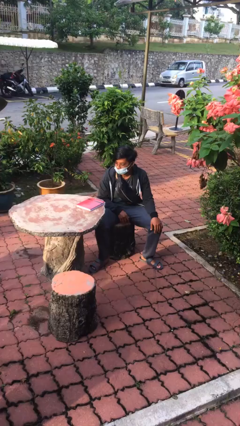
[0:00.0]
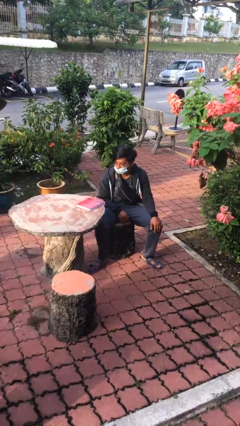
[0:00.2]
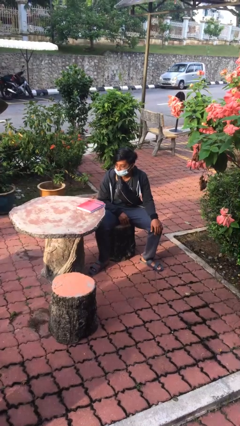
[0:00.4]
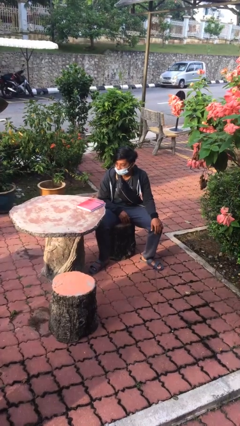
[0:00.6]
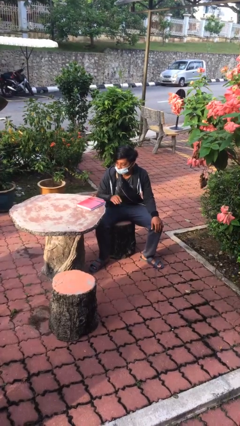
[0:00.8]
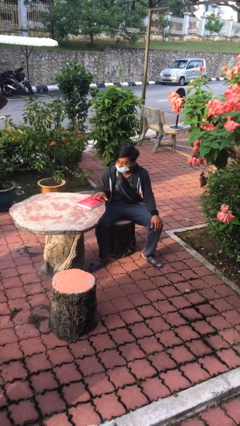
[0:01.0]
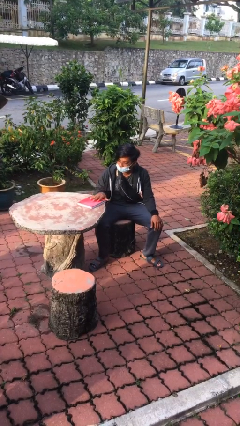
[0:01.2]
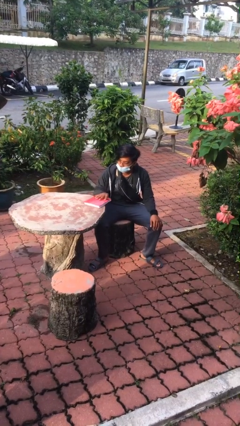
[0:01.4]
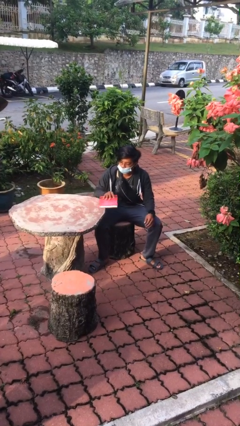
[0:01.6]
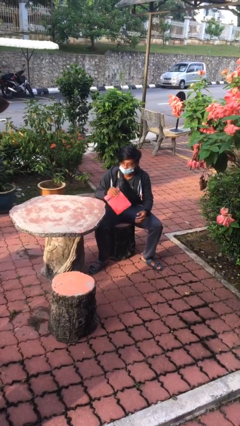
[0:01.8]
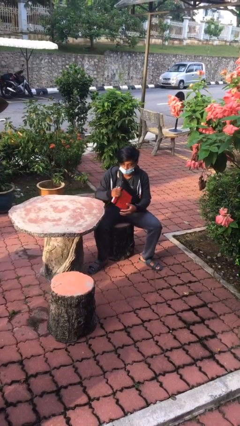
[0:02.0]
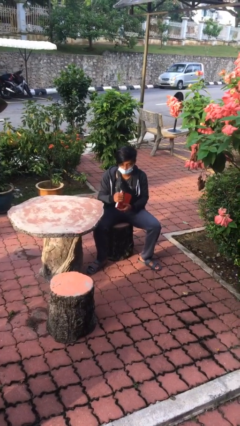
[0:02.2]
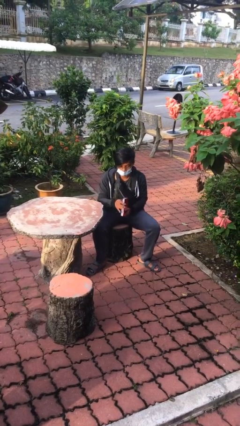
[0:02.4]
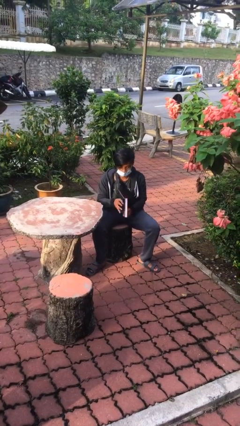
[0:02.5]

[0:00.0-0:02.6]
person picks up object from table

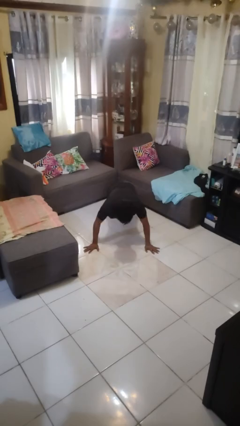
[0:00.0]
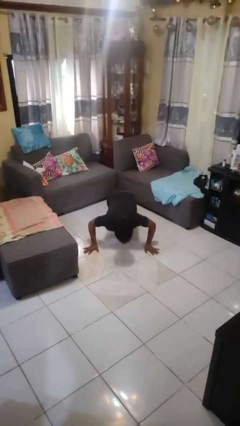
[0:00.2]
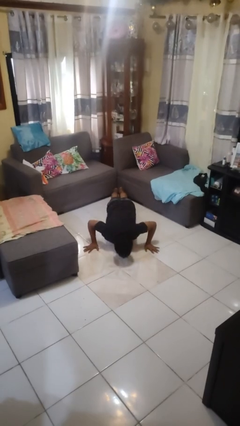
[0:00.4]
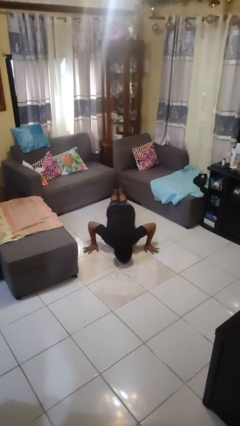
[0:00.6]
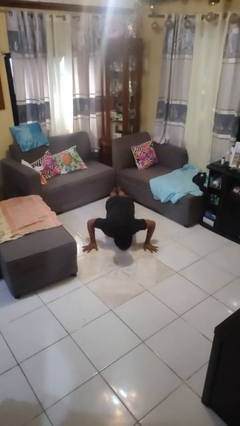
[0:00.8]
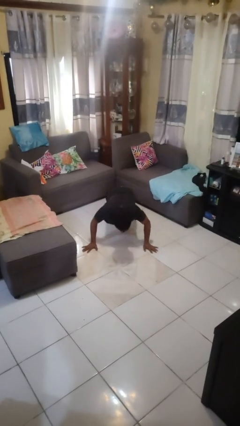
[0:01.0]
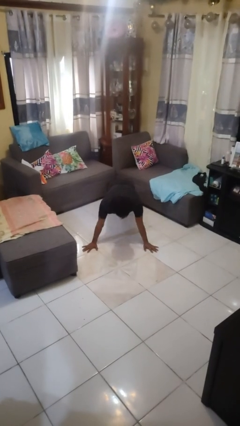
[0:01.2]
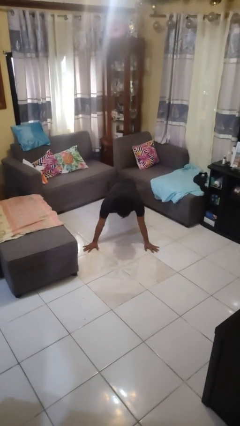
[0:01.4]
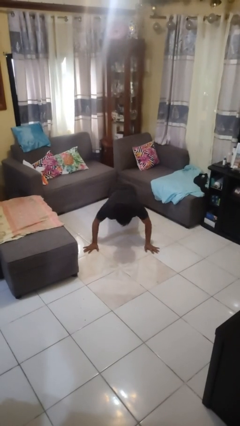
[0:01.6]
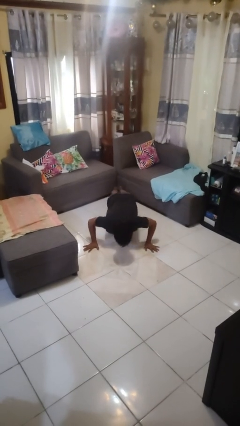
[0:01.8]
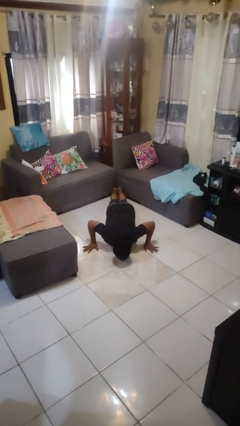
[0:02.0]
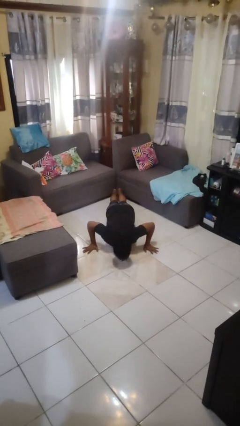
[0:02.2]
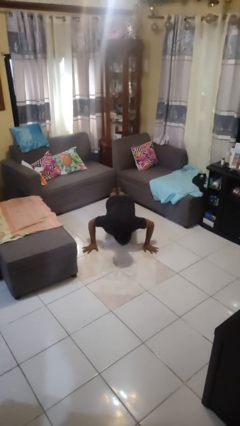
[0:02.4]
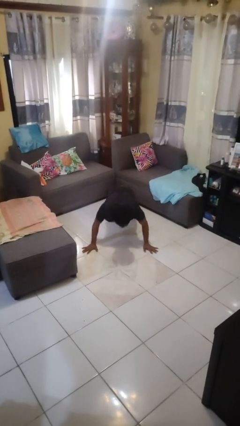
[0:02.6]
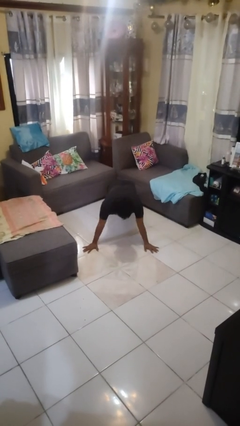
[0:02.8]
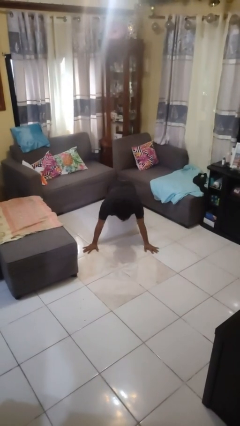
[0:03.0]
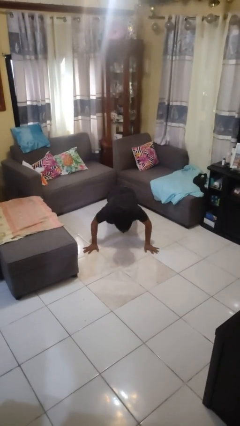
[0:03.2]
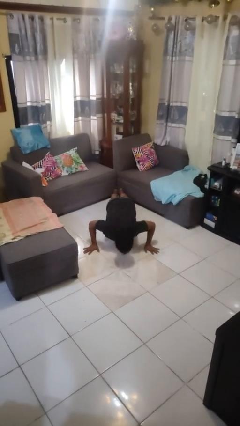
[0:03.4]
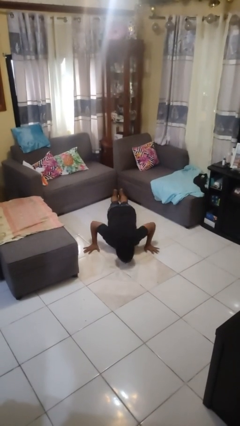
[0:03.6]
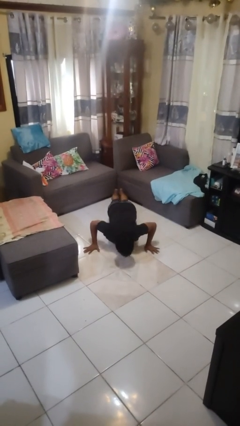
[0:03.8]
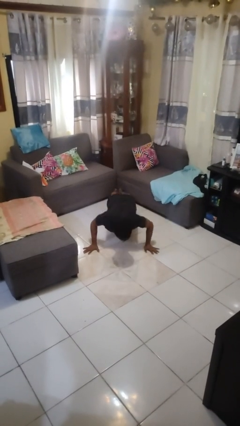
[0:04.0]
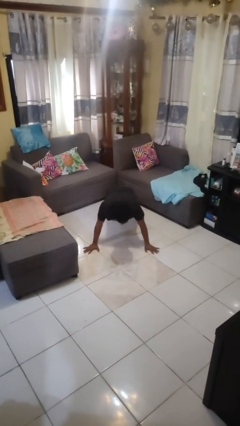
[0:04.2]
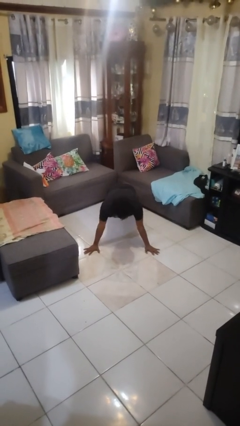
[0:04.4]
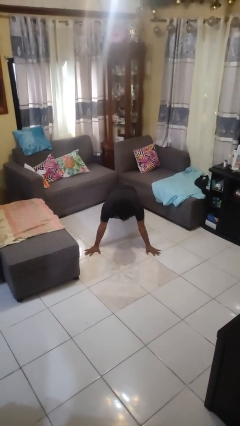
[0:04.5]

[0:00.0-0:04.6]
person exercises with pushup

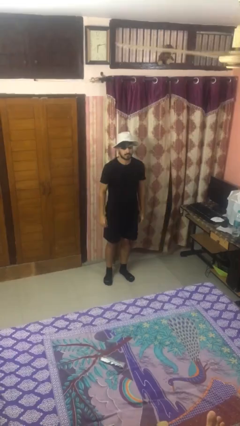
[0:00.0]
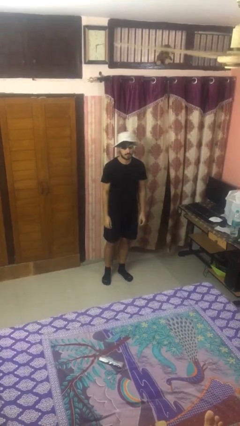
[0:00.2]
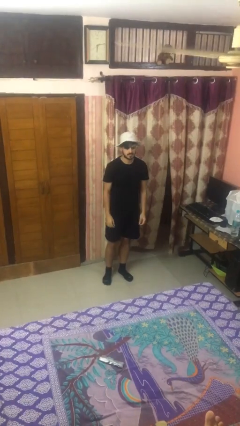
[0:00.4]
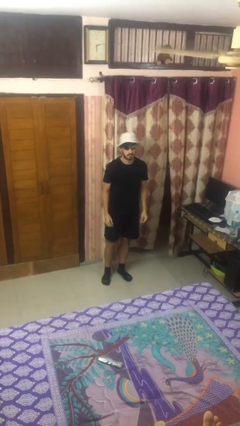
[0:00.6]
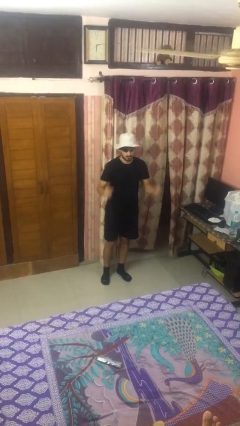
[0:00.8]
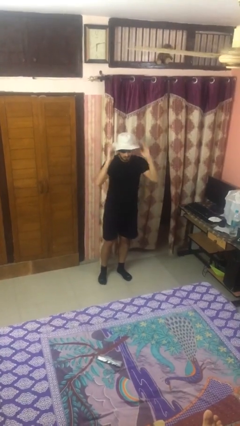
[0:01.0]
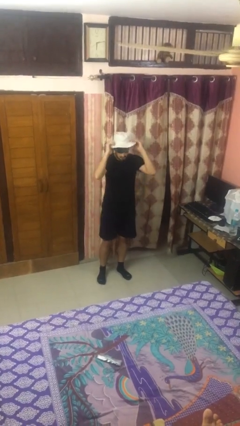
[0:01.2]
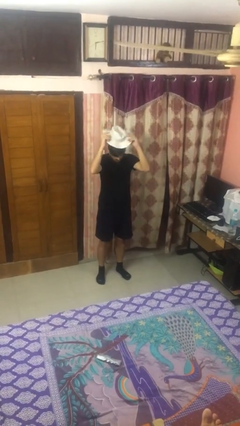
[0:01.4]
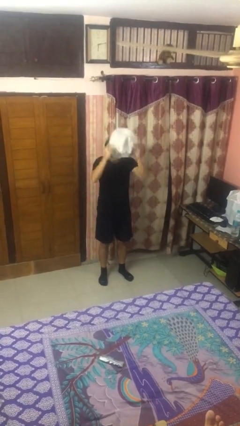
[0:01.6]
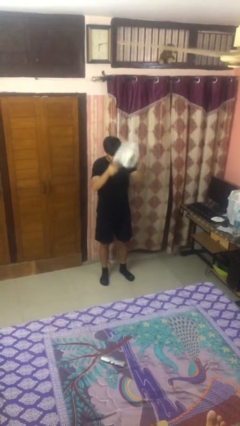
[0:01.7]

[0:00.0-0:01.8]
person takes off hat

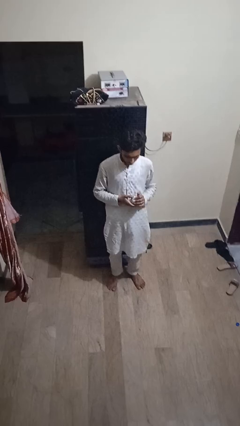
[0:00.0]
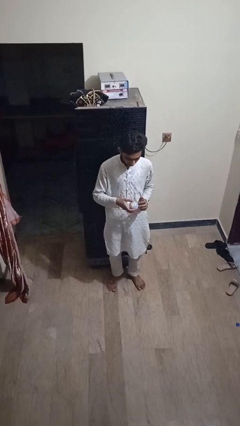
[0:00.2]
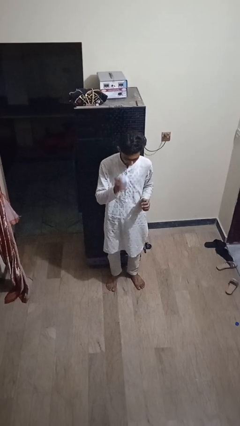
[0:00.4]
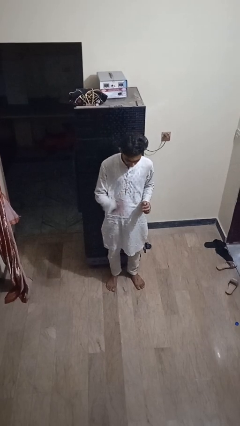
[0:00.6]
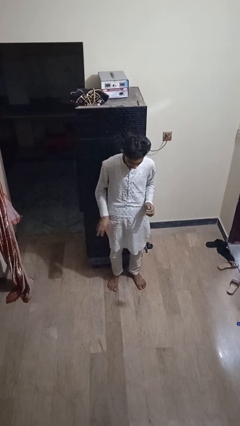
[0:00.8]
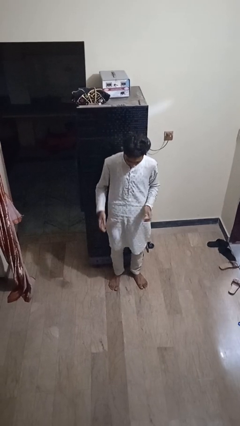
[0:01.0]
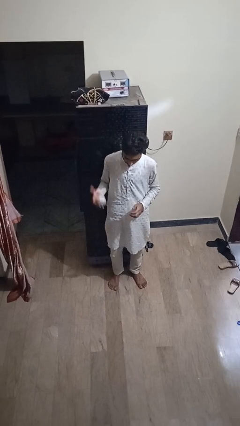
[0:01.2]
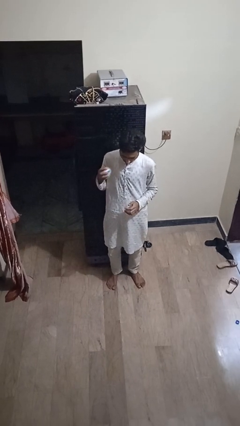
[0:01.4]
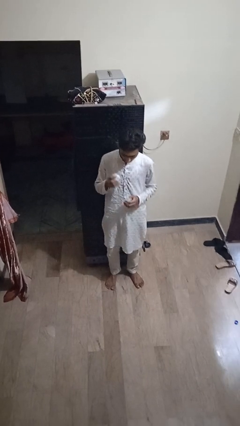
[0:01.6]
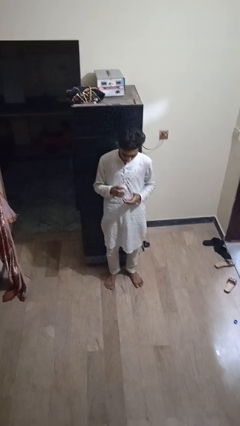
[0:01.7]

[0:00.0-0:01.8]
person bounces ball on floor

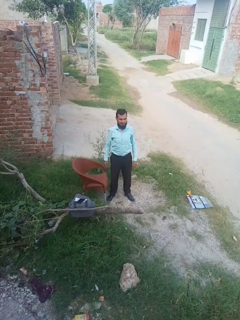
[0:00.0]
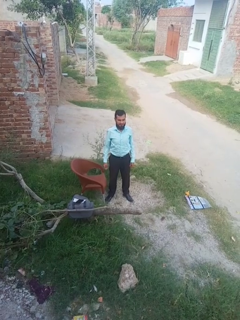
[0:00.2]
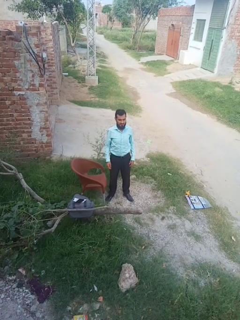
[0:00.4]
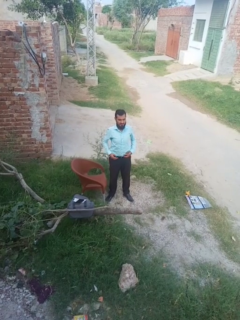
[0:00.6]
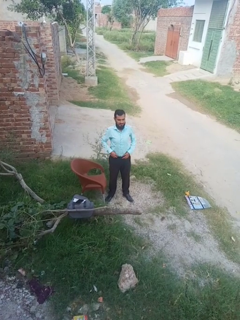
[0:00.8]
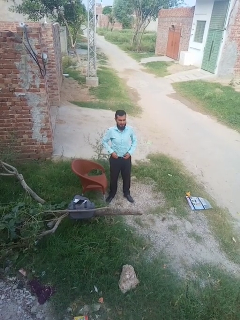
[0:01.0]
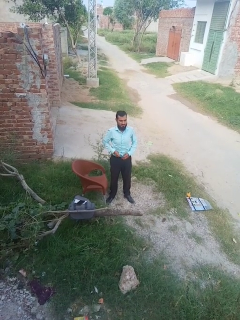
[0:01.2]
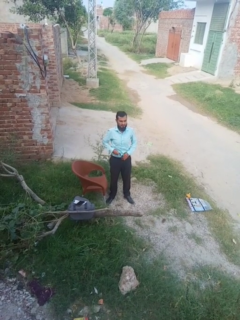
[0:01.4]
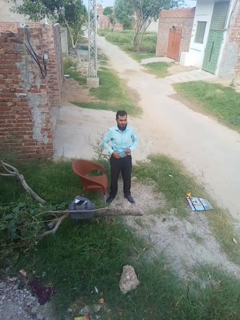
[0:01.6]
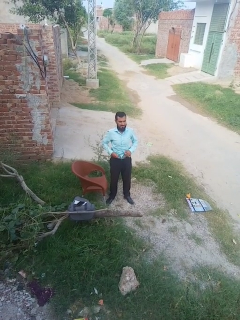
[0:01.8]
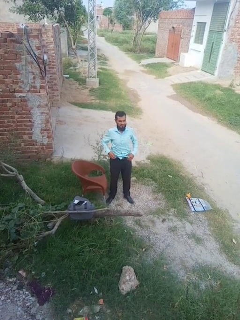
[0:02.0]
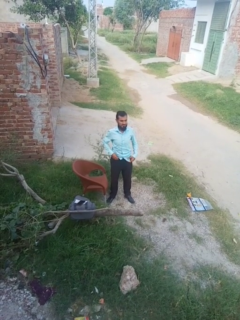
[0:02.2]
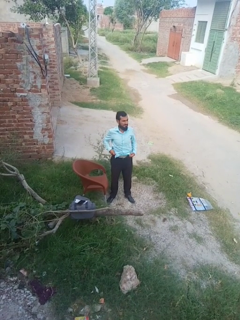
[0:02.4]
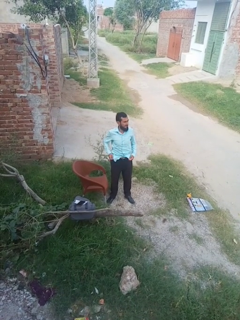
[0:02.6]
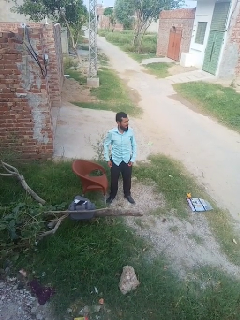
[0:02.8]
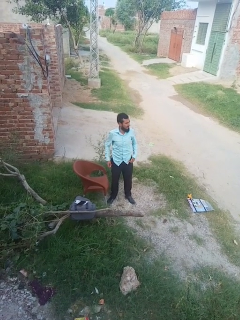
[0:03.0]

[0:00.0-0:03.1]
person untucks shirt

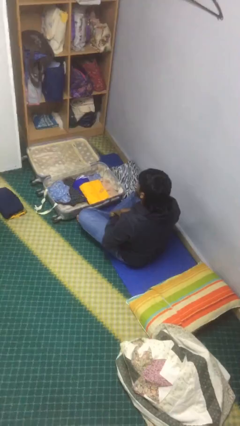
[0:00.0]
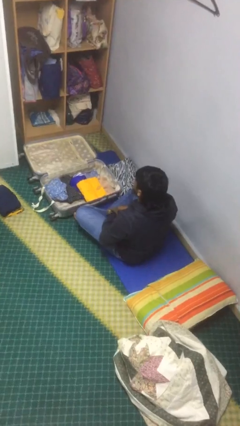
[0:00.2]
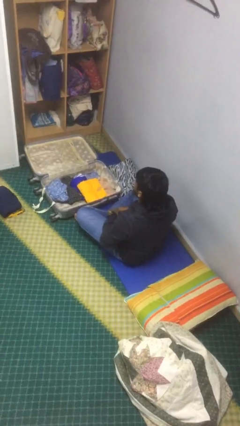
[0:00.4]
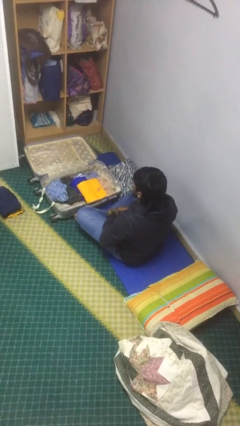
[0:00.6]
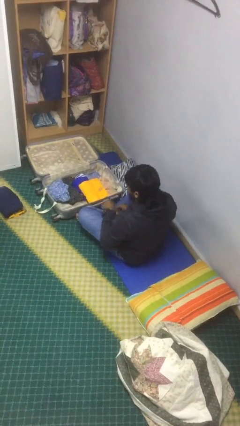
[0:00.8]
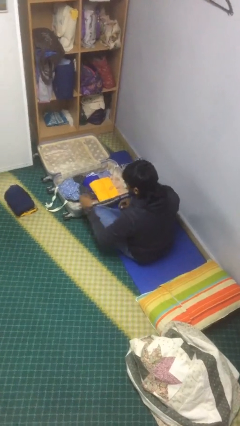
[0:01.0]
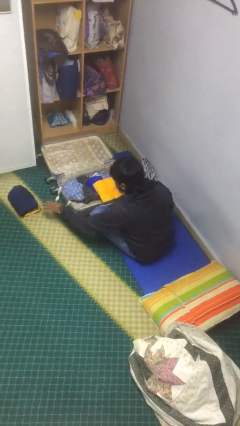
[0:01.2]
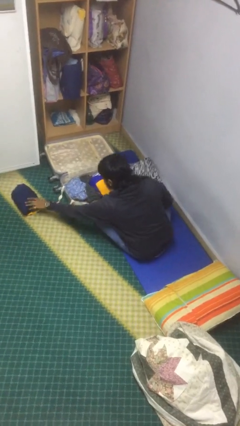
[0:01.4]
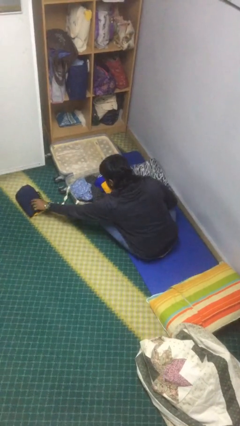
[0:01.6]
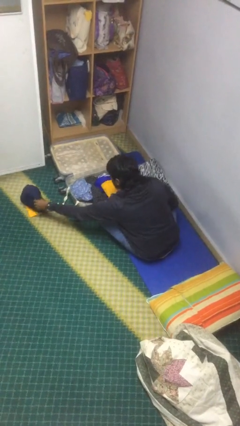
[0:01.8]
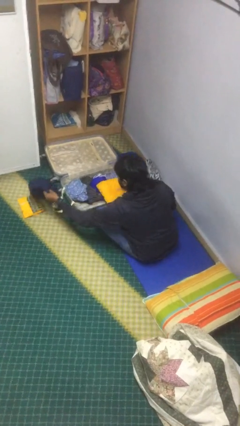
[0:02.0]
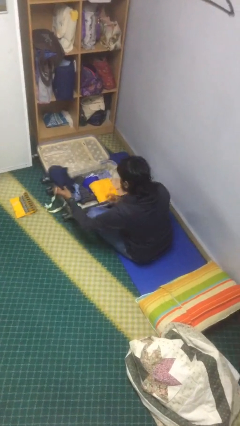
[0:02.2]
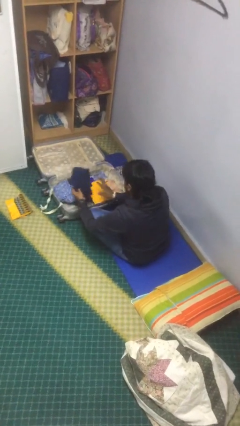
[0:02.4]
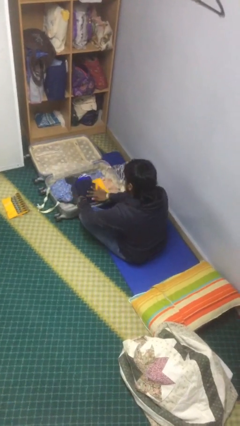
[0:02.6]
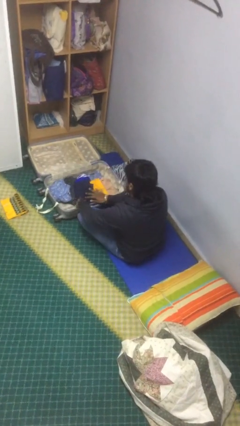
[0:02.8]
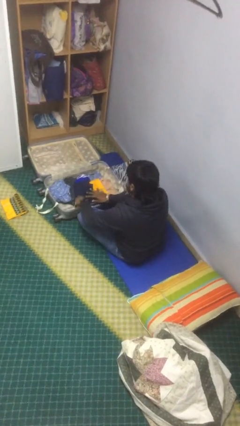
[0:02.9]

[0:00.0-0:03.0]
person loads clothes into suitcase

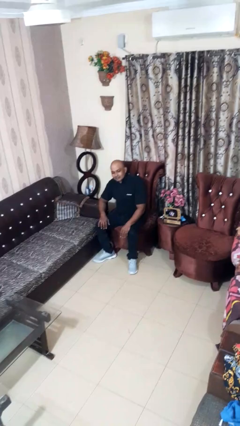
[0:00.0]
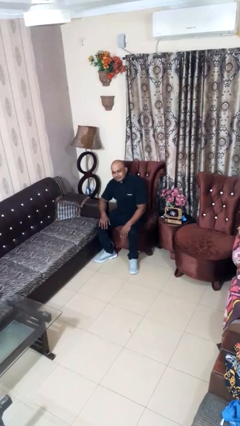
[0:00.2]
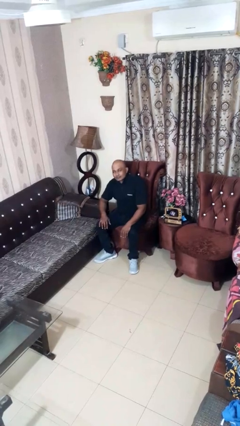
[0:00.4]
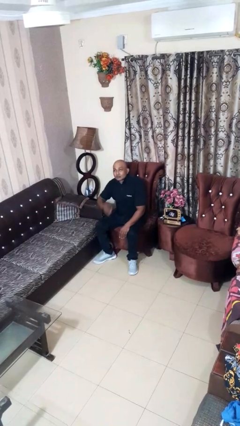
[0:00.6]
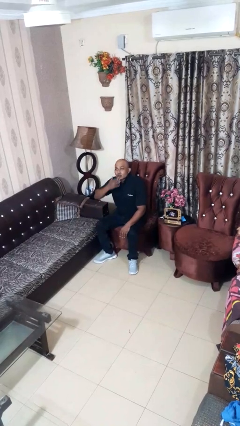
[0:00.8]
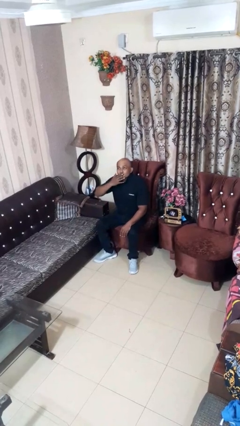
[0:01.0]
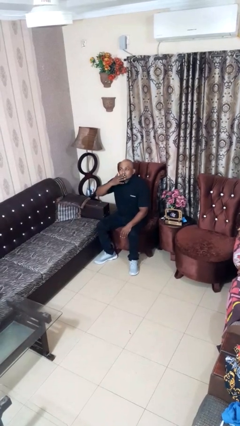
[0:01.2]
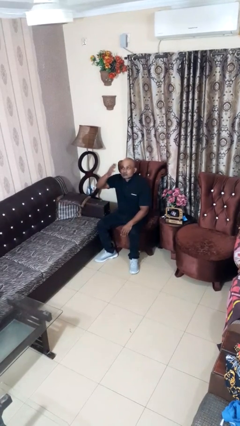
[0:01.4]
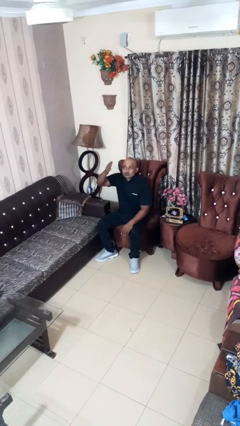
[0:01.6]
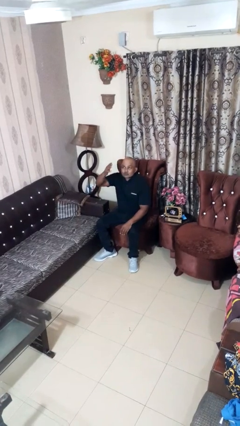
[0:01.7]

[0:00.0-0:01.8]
person gestures blow kiss
